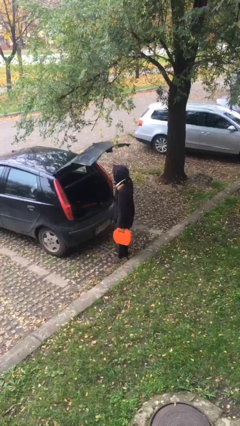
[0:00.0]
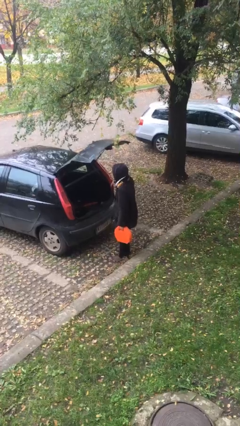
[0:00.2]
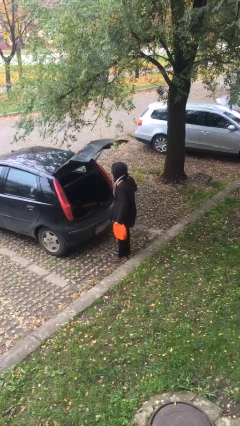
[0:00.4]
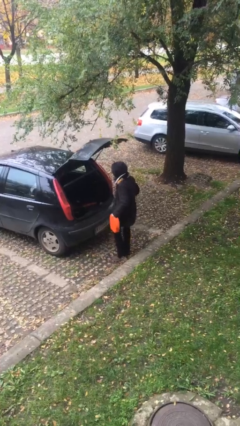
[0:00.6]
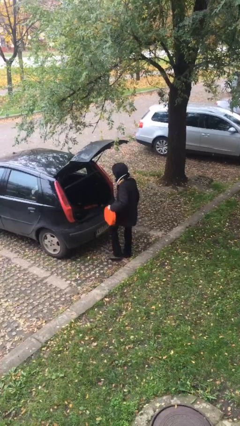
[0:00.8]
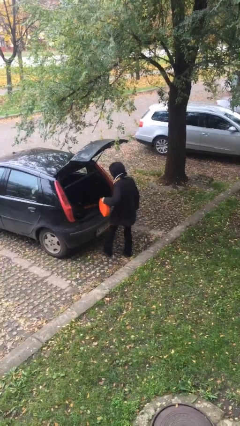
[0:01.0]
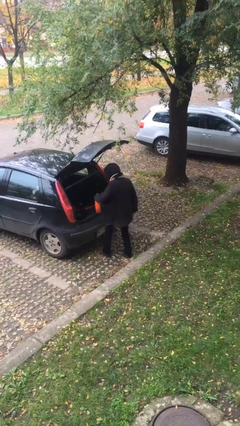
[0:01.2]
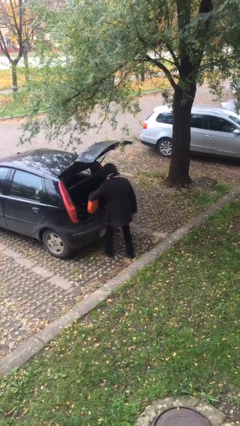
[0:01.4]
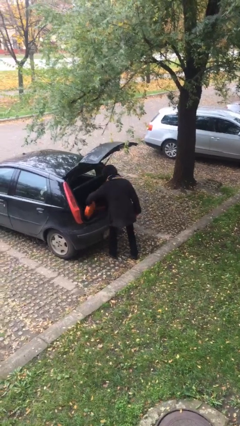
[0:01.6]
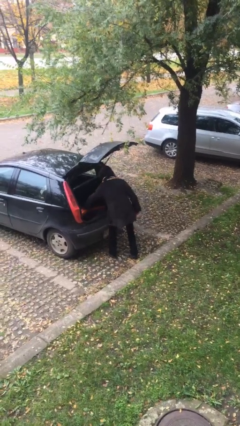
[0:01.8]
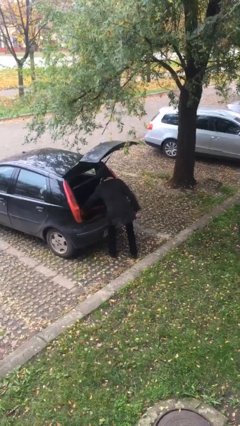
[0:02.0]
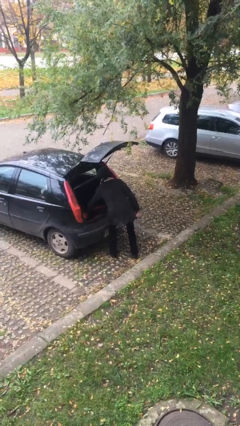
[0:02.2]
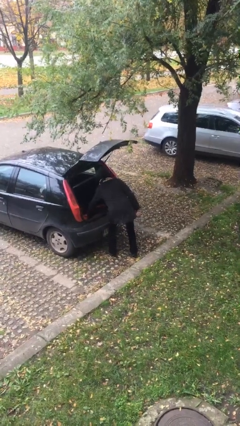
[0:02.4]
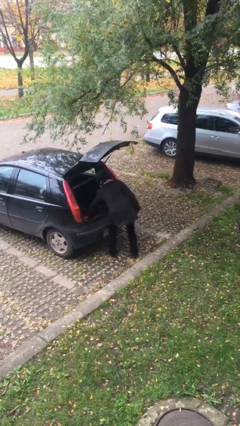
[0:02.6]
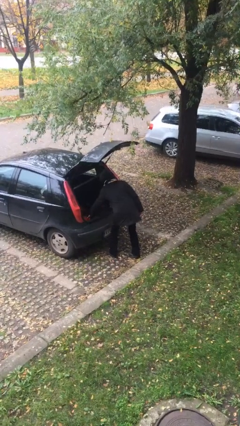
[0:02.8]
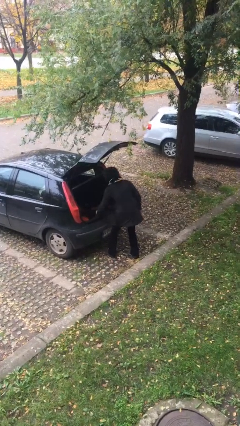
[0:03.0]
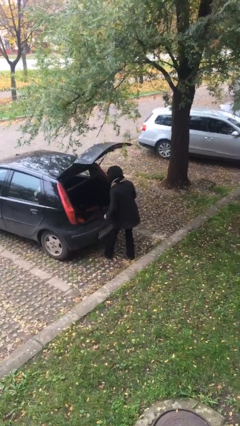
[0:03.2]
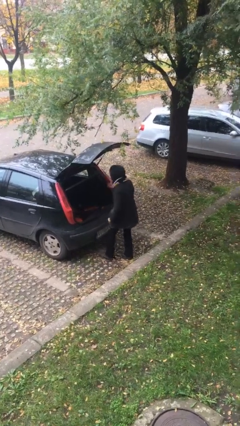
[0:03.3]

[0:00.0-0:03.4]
person loads car

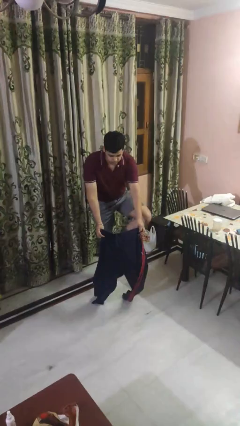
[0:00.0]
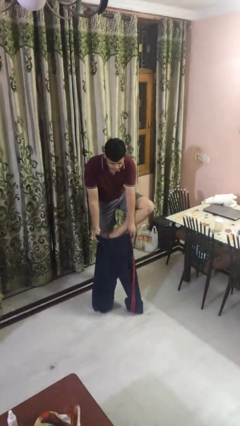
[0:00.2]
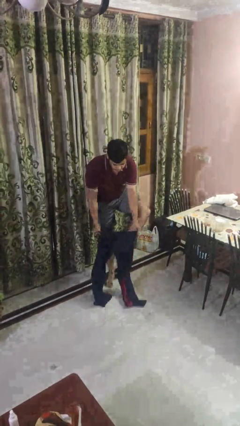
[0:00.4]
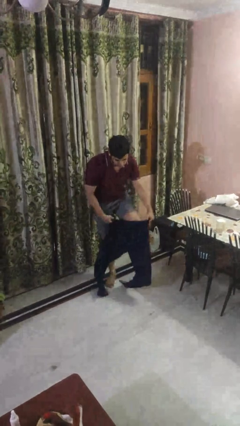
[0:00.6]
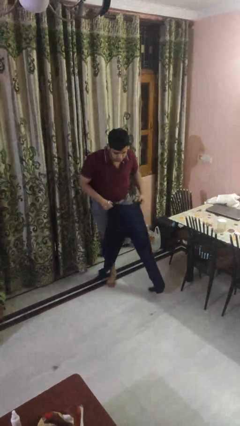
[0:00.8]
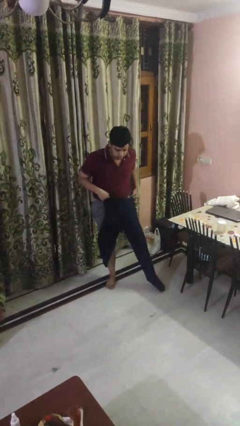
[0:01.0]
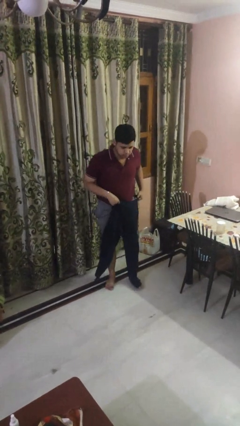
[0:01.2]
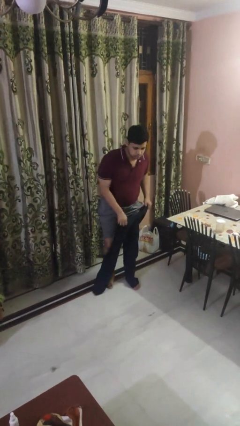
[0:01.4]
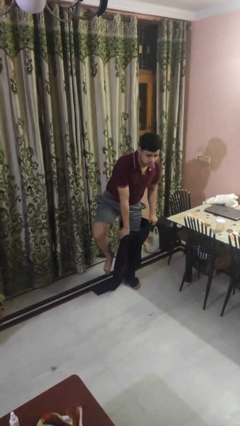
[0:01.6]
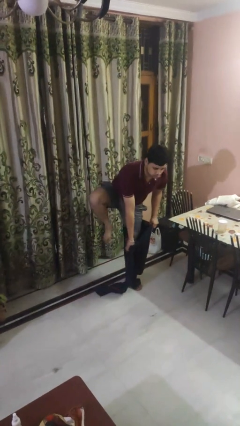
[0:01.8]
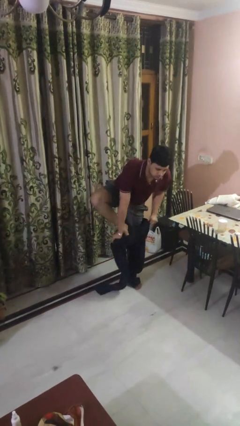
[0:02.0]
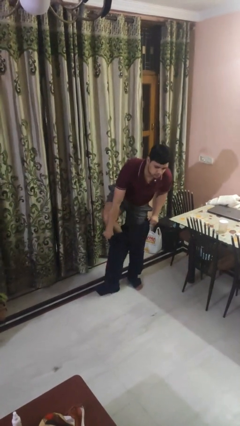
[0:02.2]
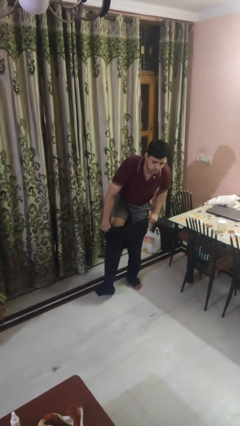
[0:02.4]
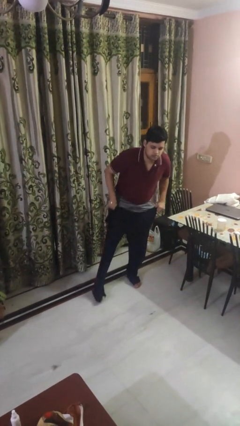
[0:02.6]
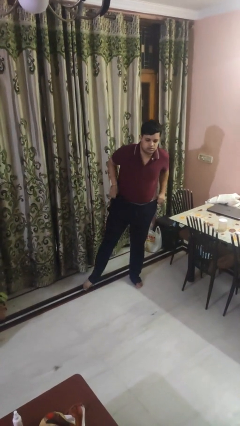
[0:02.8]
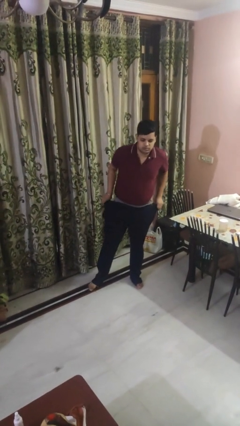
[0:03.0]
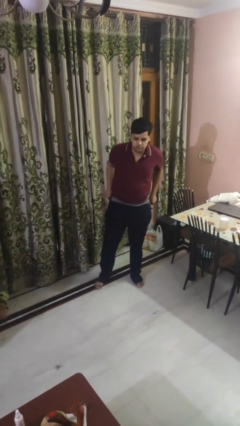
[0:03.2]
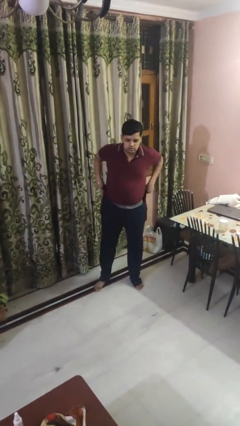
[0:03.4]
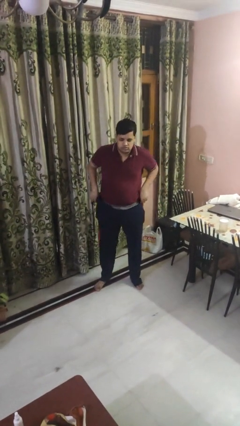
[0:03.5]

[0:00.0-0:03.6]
person puts on pants

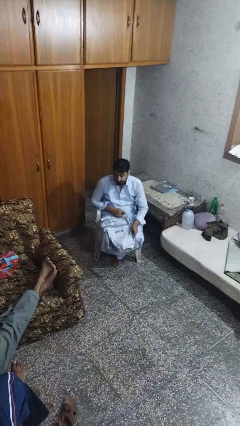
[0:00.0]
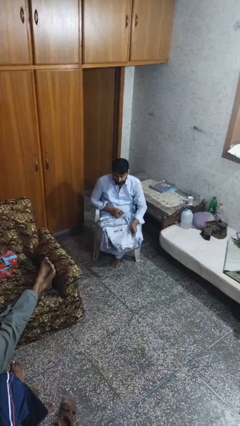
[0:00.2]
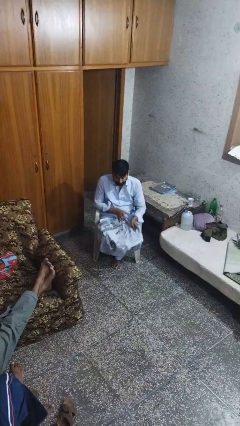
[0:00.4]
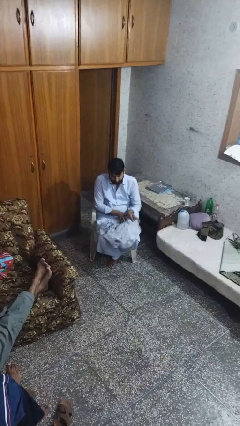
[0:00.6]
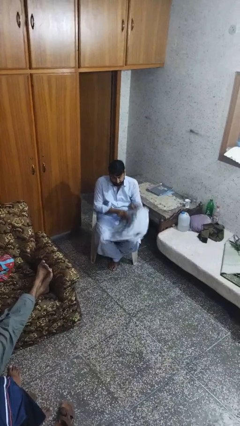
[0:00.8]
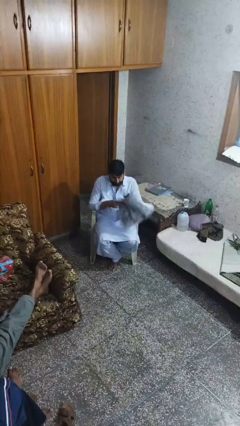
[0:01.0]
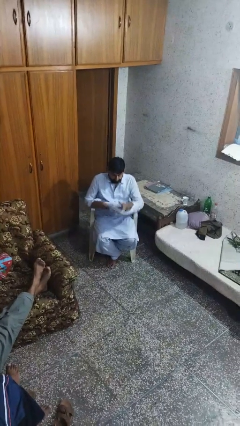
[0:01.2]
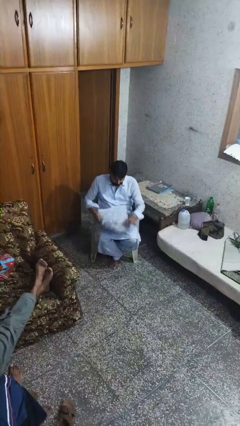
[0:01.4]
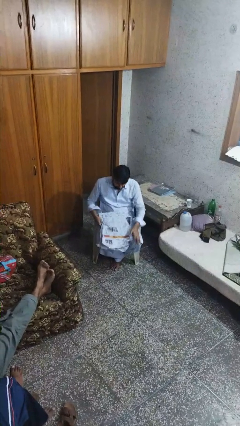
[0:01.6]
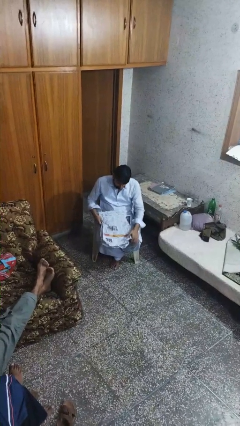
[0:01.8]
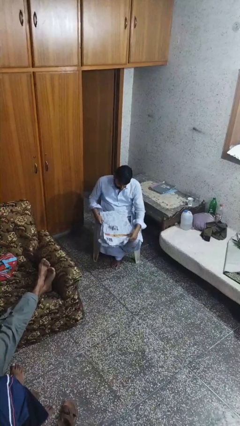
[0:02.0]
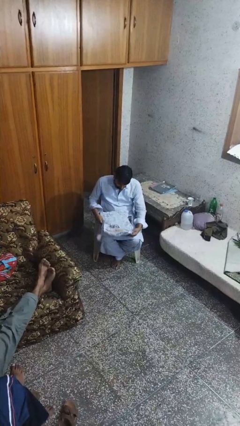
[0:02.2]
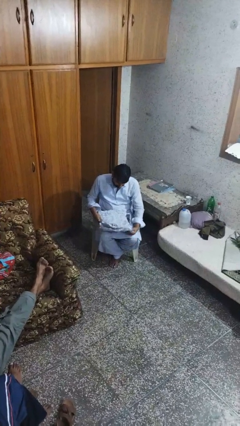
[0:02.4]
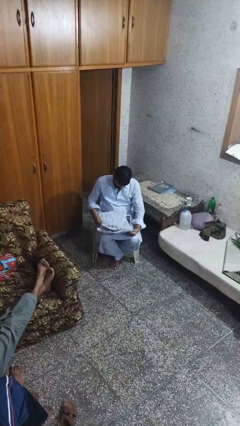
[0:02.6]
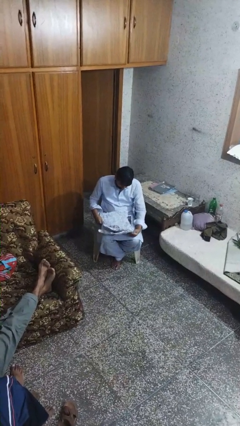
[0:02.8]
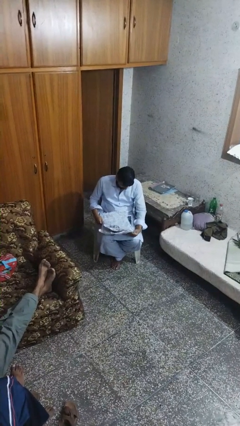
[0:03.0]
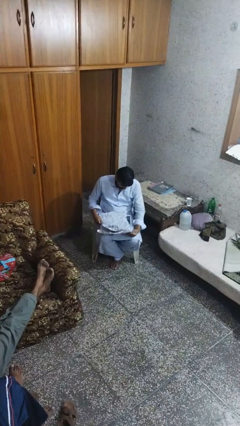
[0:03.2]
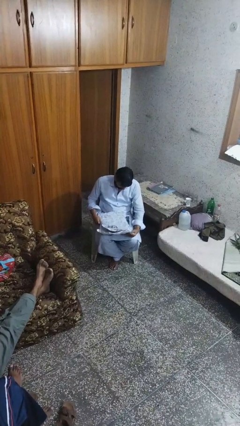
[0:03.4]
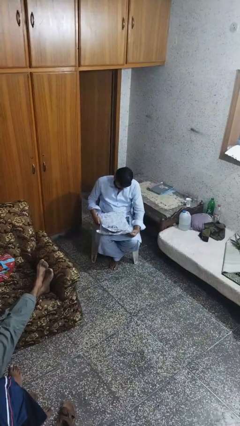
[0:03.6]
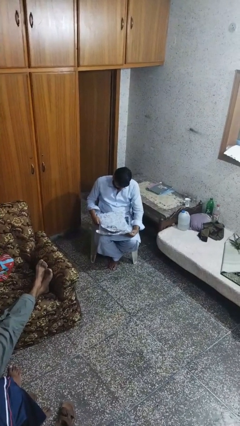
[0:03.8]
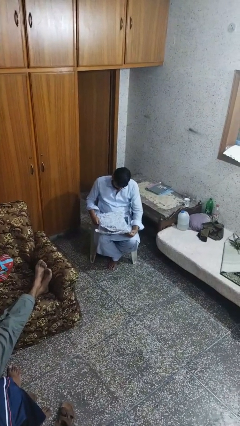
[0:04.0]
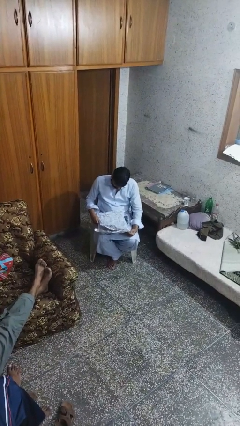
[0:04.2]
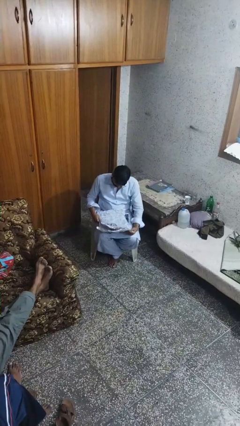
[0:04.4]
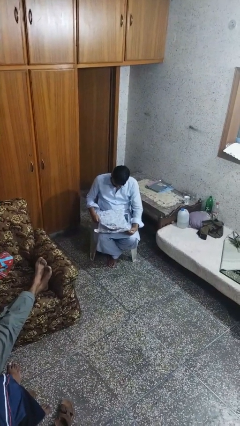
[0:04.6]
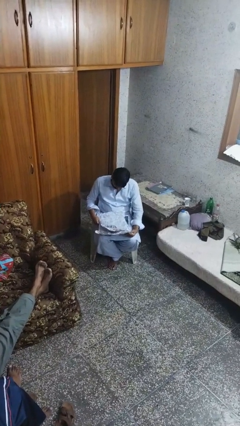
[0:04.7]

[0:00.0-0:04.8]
person reads newspaper

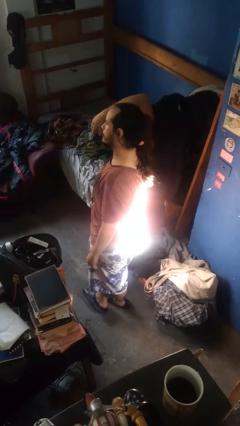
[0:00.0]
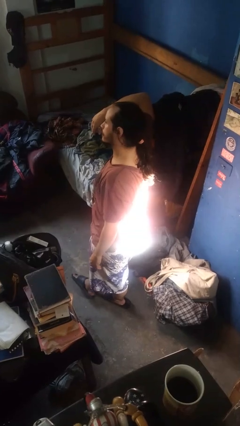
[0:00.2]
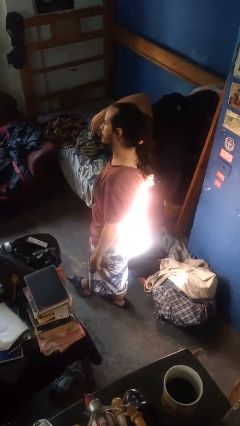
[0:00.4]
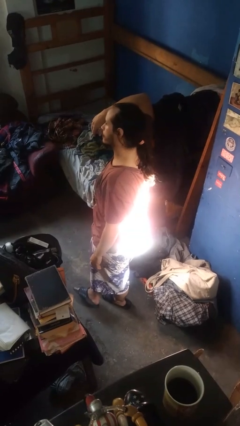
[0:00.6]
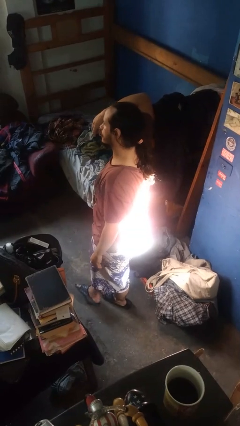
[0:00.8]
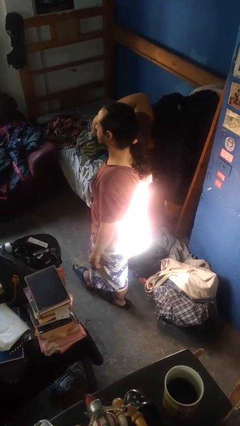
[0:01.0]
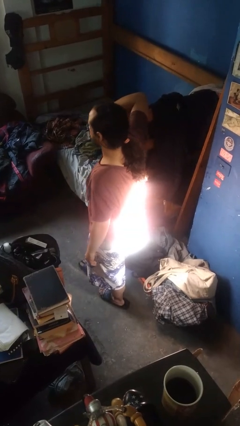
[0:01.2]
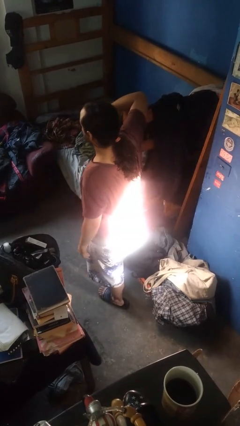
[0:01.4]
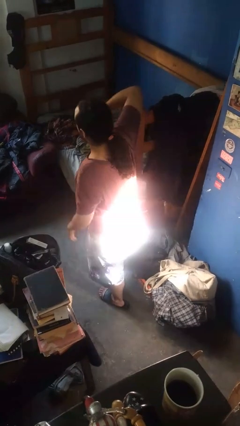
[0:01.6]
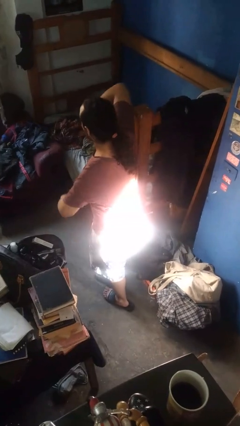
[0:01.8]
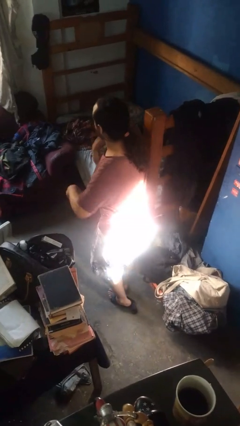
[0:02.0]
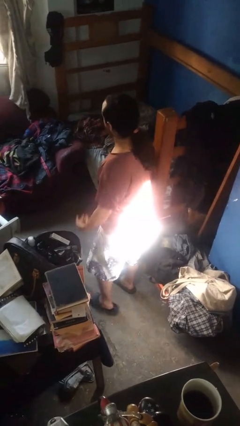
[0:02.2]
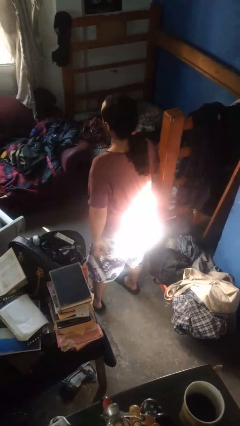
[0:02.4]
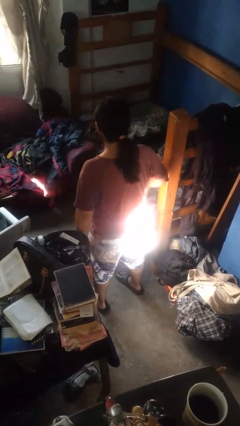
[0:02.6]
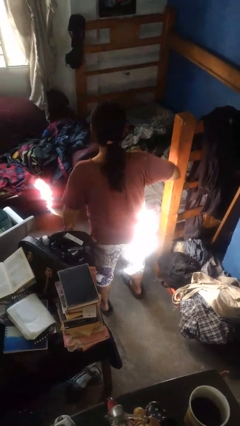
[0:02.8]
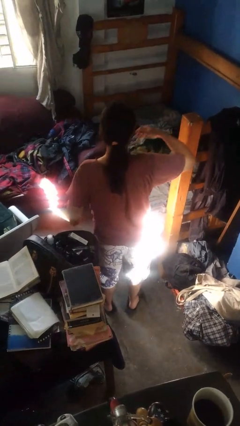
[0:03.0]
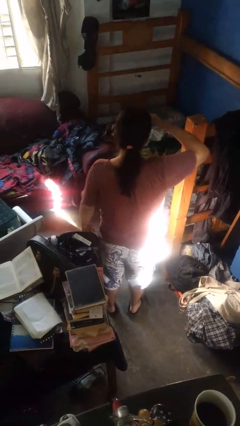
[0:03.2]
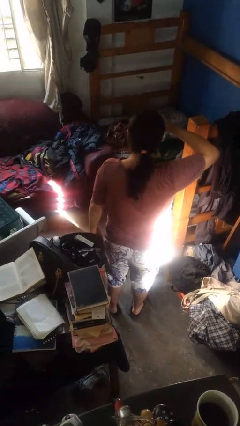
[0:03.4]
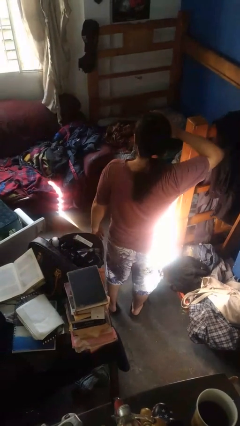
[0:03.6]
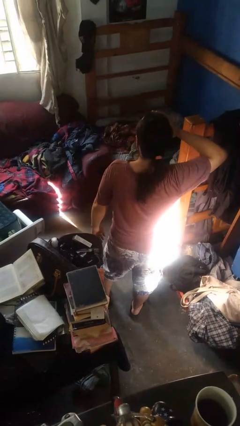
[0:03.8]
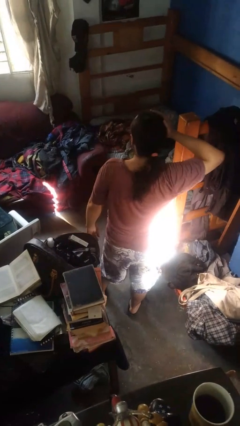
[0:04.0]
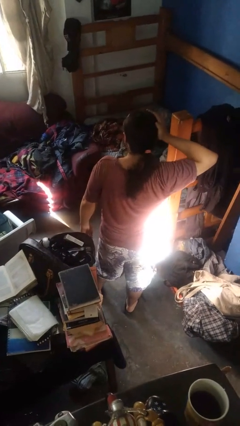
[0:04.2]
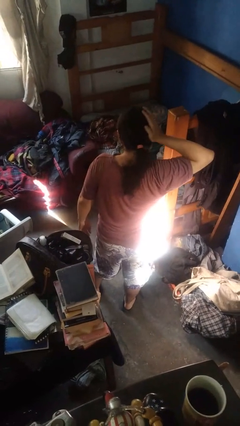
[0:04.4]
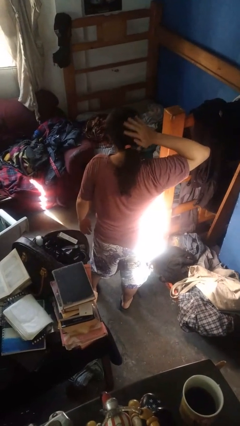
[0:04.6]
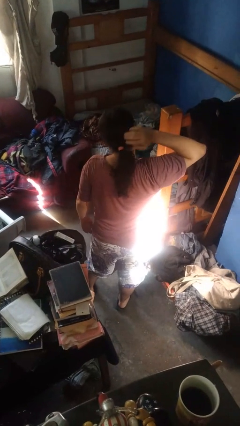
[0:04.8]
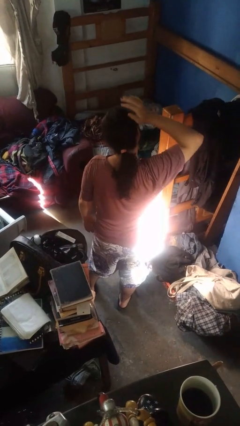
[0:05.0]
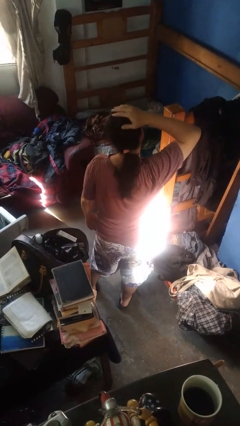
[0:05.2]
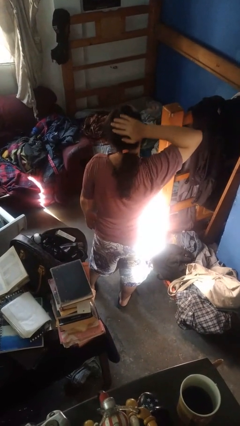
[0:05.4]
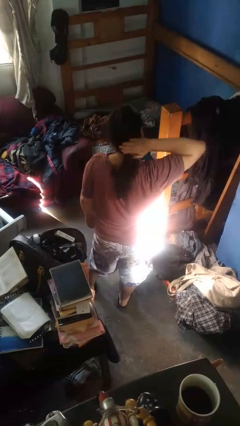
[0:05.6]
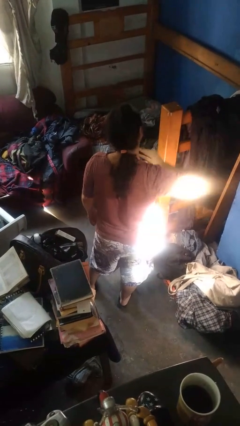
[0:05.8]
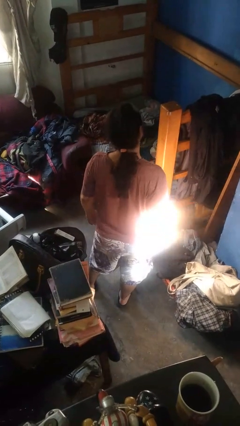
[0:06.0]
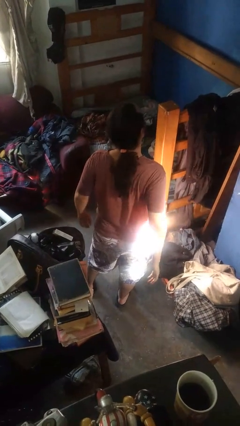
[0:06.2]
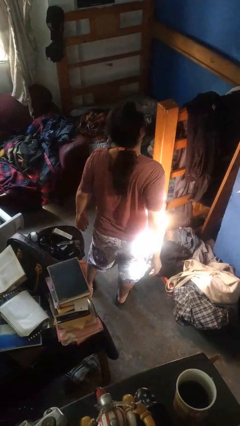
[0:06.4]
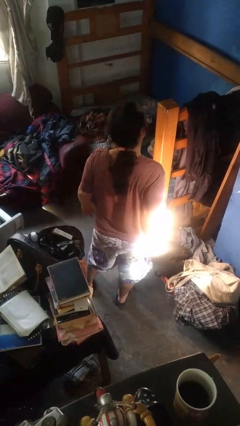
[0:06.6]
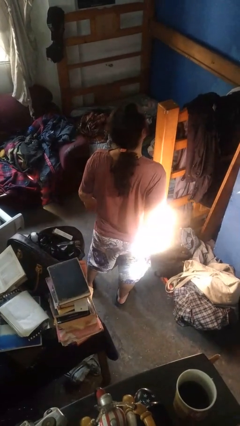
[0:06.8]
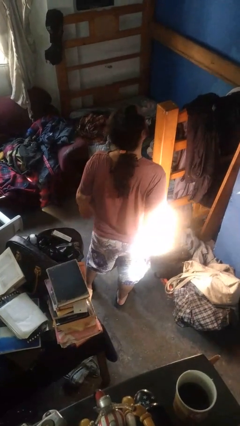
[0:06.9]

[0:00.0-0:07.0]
person strokes hair
